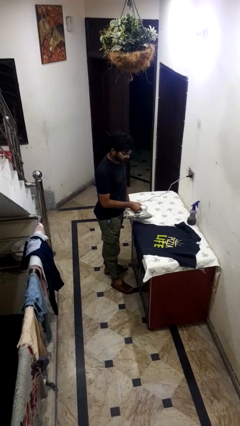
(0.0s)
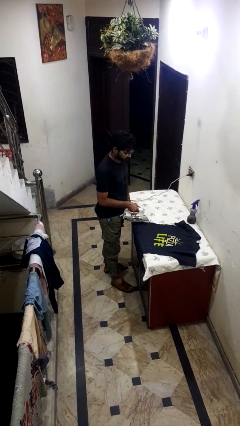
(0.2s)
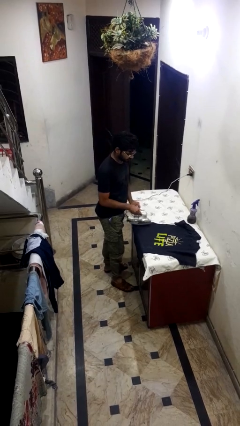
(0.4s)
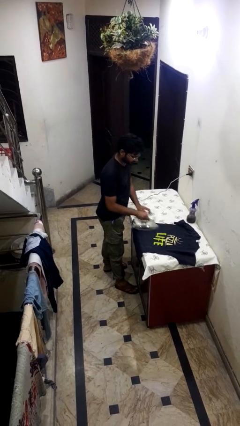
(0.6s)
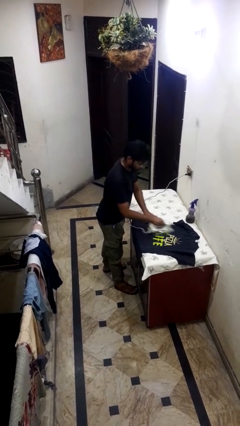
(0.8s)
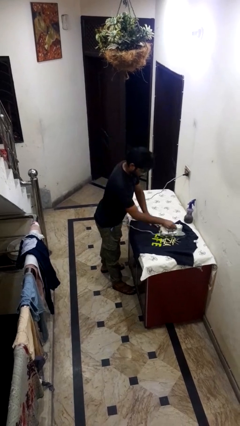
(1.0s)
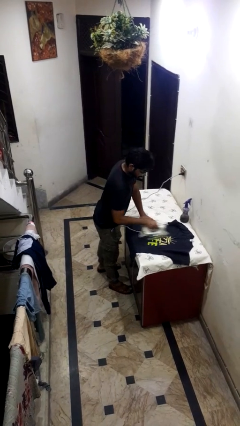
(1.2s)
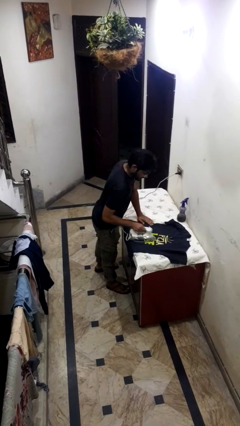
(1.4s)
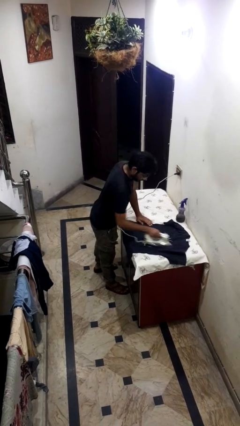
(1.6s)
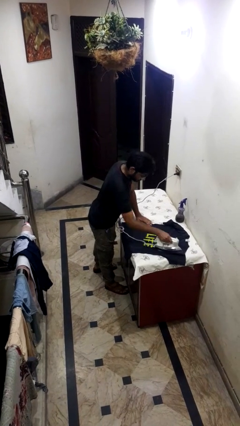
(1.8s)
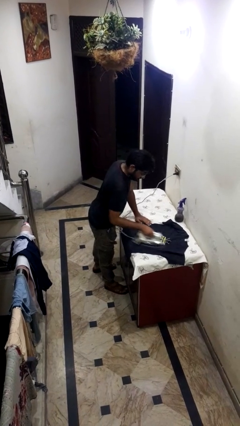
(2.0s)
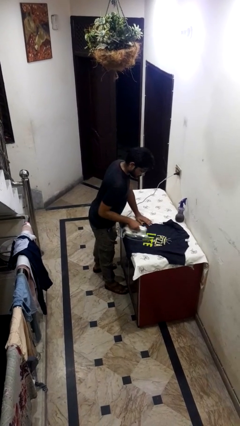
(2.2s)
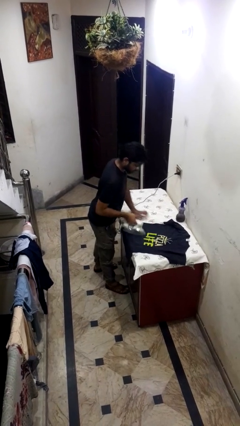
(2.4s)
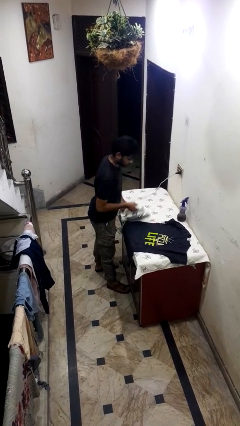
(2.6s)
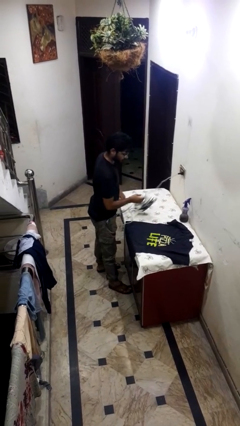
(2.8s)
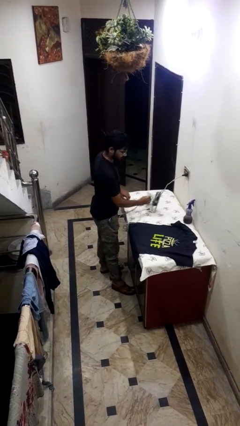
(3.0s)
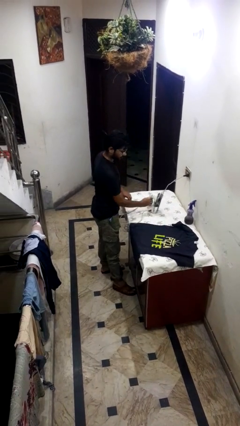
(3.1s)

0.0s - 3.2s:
person irons clothes

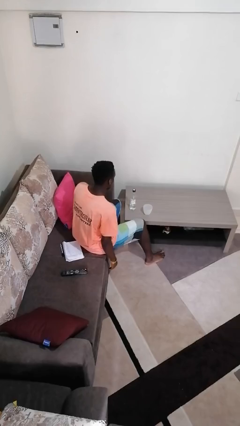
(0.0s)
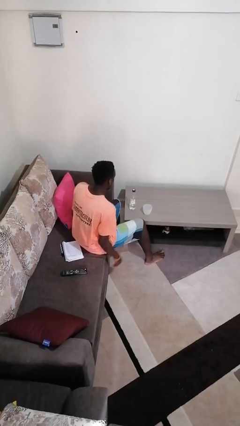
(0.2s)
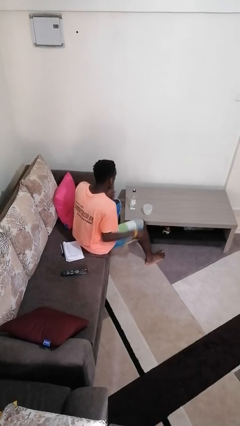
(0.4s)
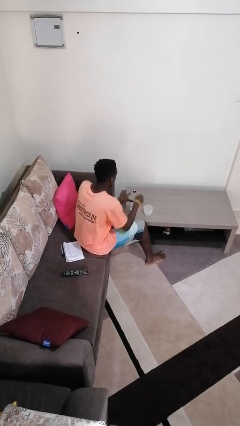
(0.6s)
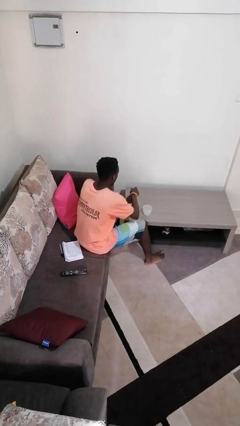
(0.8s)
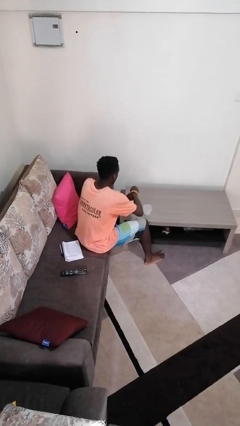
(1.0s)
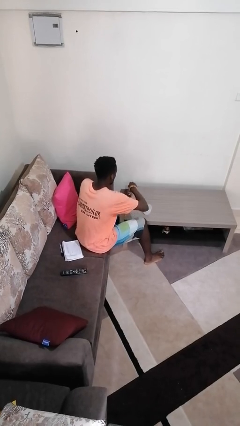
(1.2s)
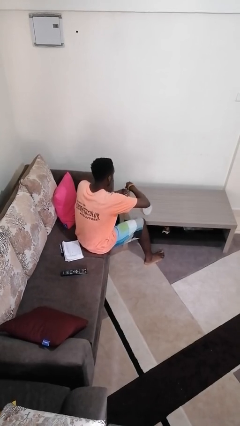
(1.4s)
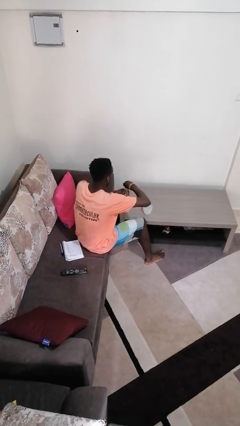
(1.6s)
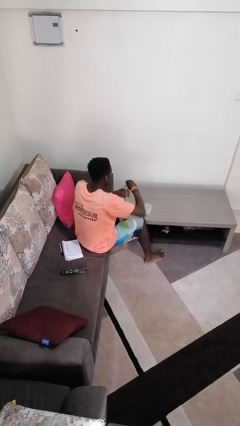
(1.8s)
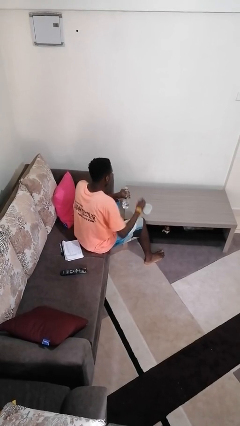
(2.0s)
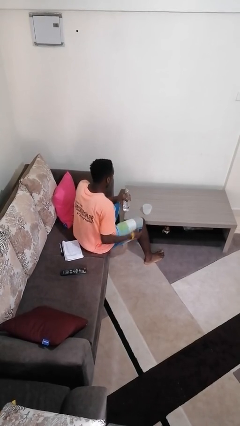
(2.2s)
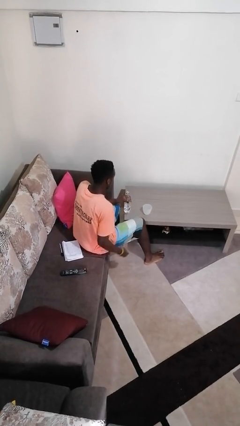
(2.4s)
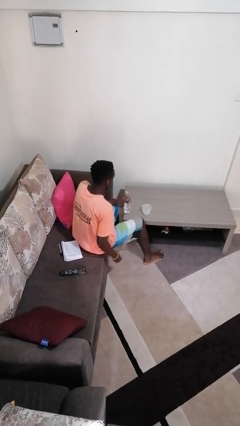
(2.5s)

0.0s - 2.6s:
person unscrews lid from bottle

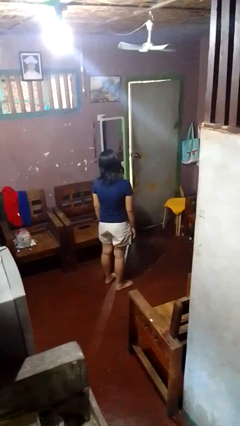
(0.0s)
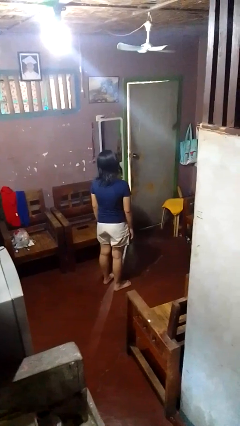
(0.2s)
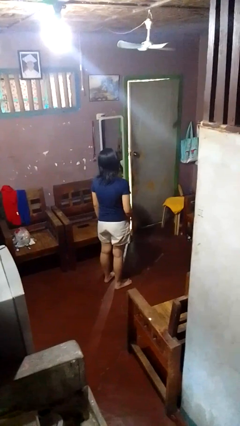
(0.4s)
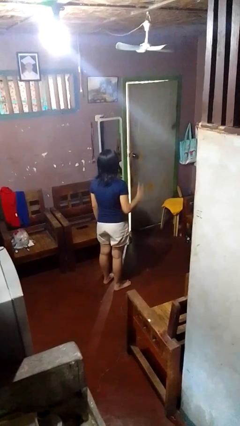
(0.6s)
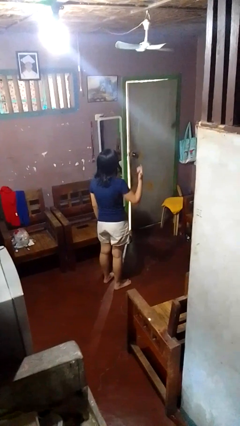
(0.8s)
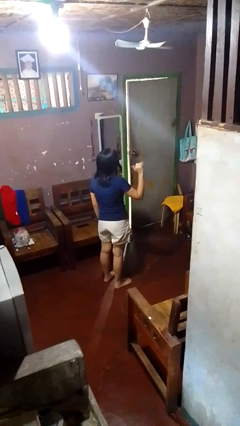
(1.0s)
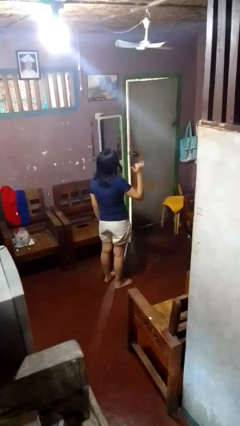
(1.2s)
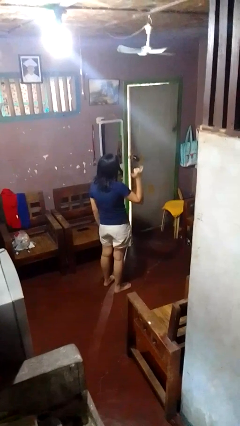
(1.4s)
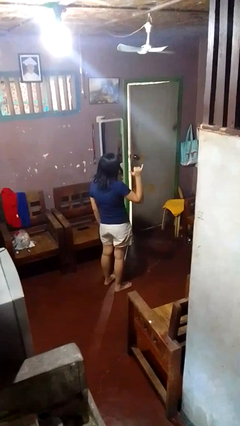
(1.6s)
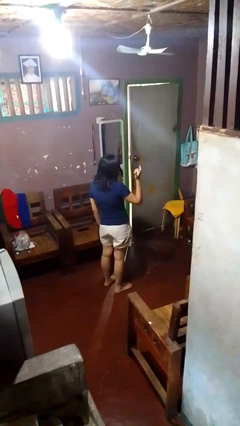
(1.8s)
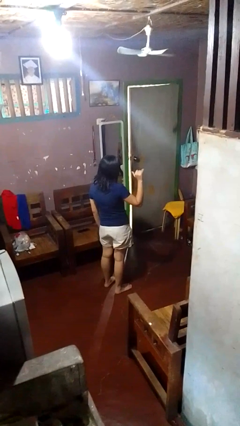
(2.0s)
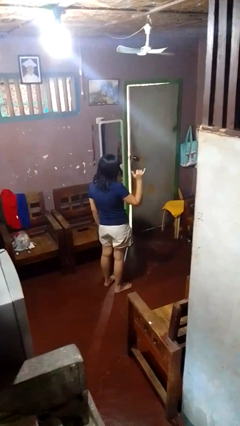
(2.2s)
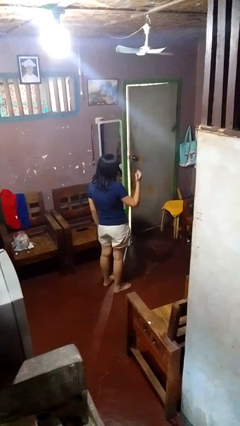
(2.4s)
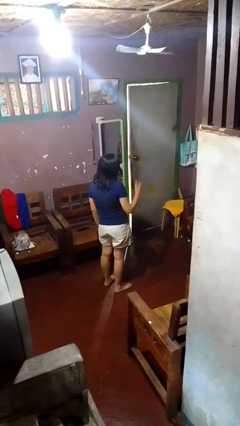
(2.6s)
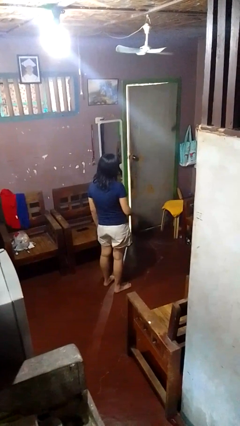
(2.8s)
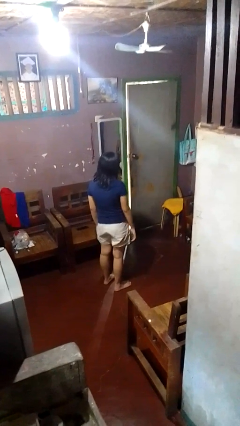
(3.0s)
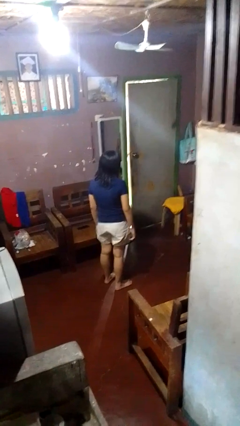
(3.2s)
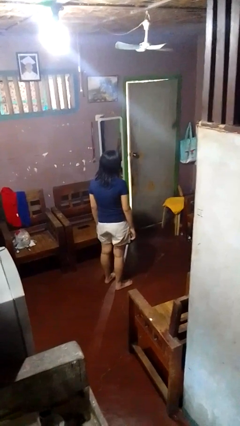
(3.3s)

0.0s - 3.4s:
person gestures hang loose

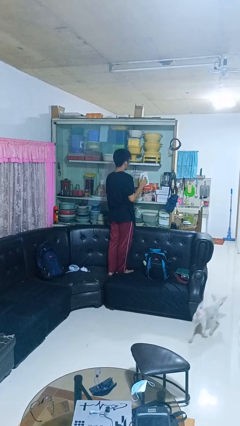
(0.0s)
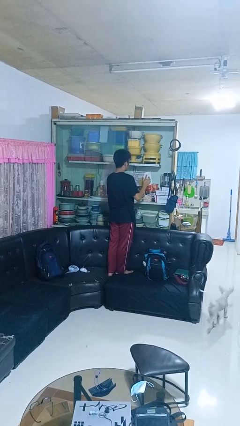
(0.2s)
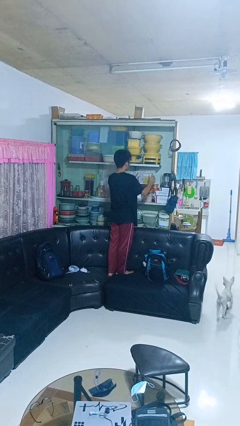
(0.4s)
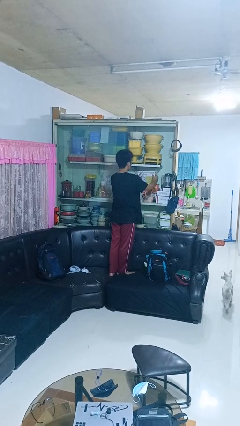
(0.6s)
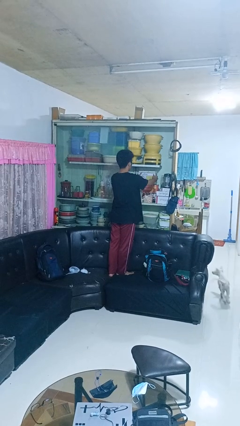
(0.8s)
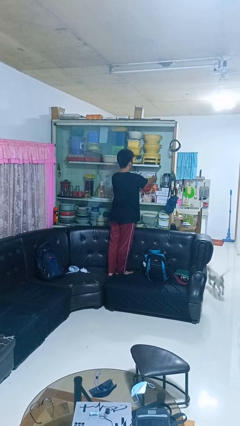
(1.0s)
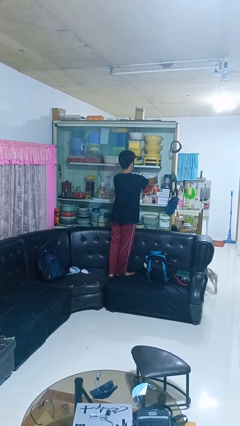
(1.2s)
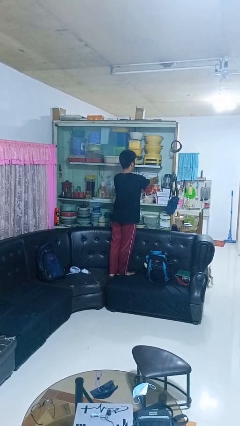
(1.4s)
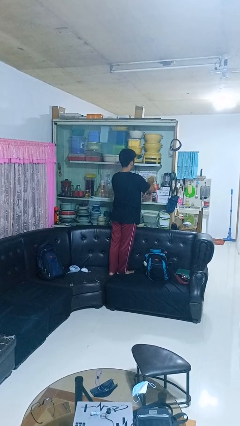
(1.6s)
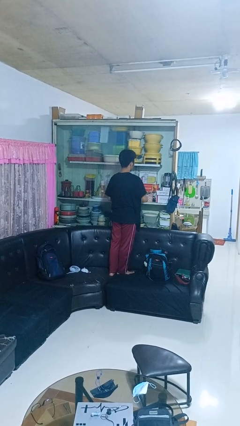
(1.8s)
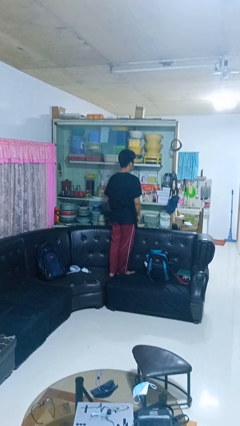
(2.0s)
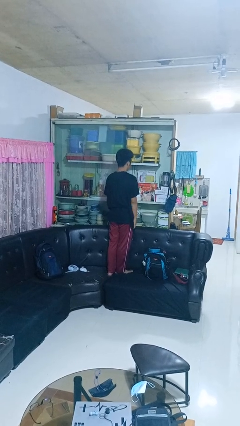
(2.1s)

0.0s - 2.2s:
person puts down object into cabinet

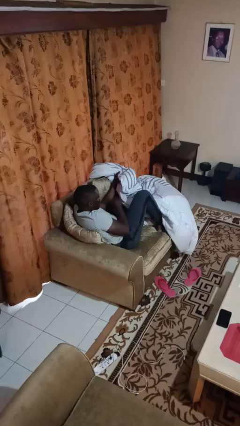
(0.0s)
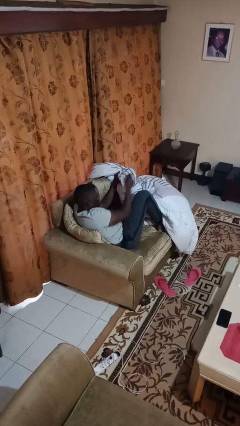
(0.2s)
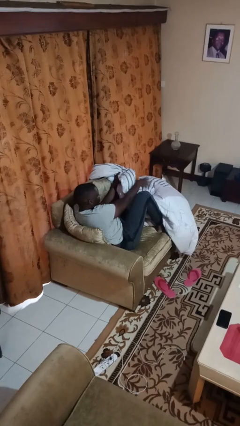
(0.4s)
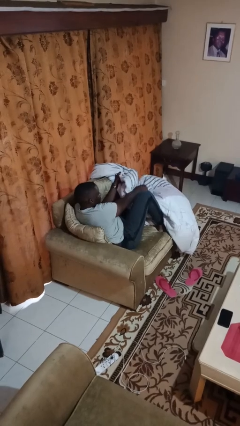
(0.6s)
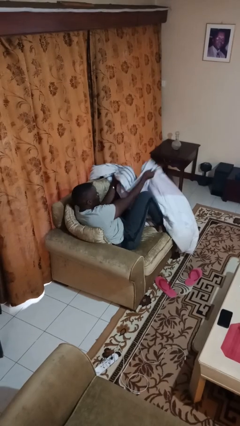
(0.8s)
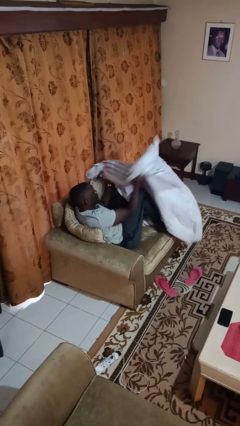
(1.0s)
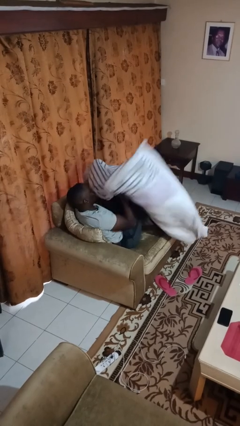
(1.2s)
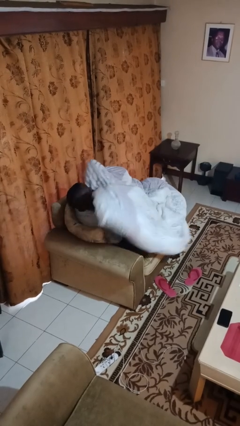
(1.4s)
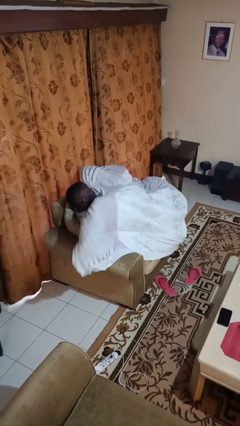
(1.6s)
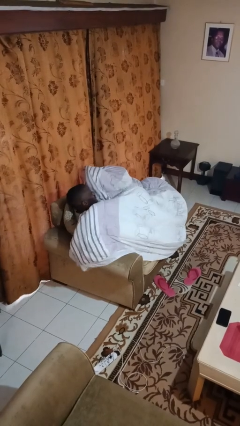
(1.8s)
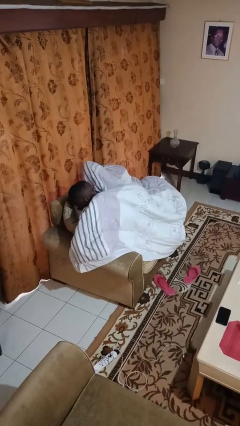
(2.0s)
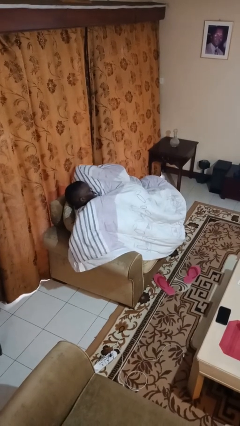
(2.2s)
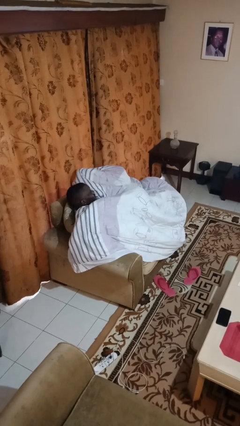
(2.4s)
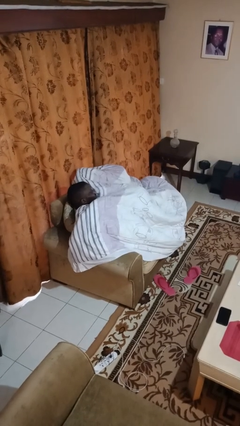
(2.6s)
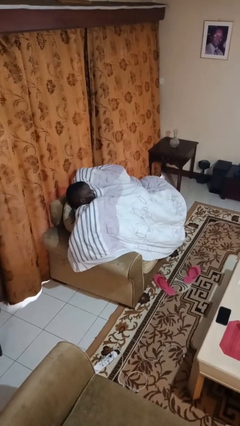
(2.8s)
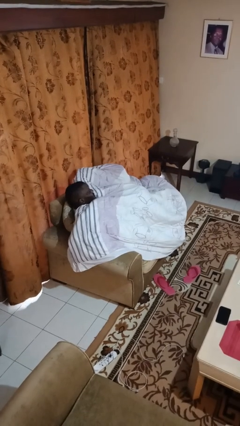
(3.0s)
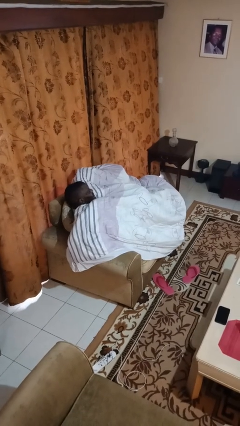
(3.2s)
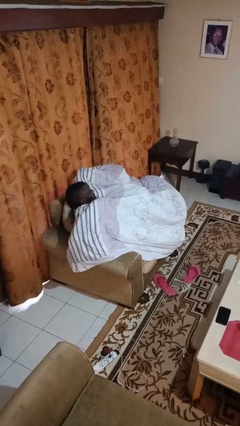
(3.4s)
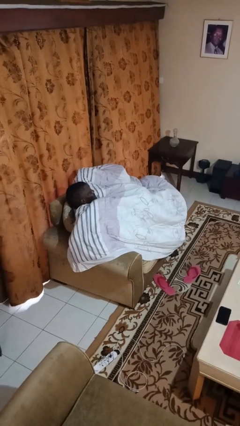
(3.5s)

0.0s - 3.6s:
person covers with blanket

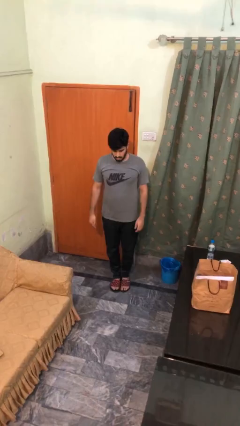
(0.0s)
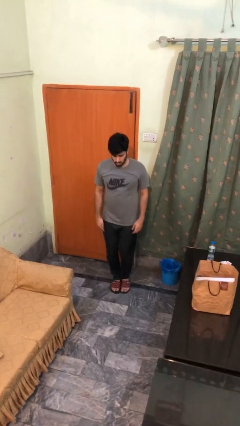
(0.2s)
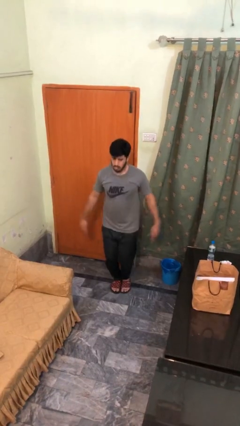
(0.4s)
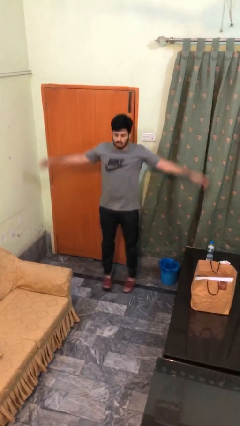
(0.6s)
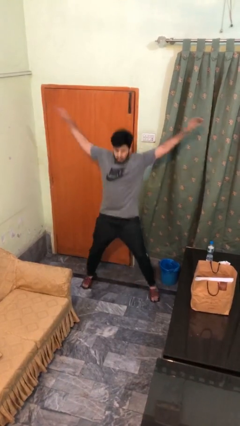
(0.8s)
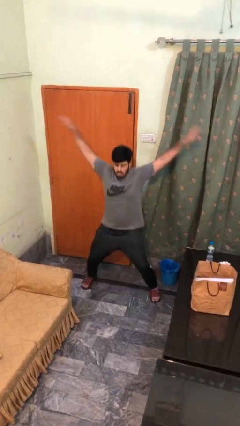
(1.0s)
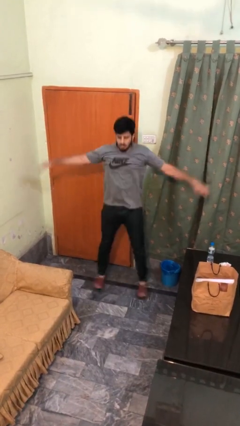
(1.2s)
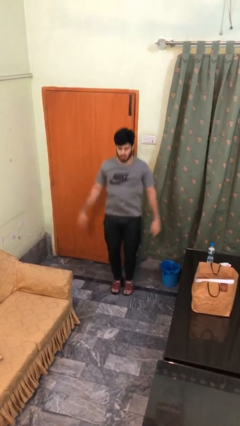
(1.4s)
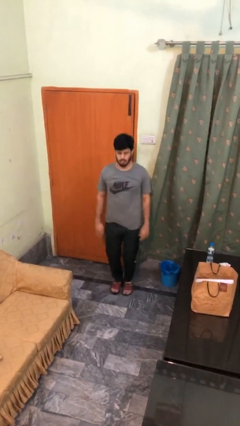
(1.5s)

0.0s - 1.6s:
person exercises with jumping jacks

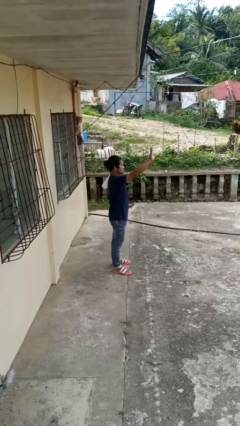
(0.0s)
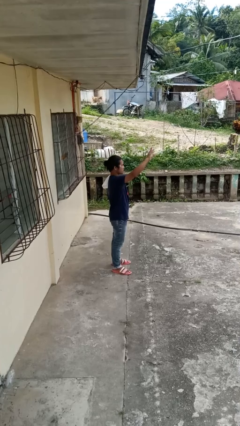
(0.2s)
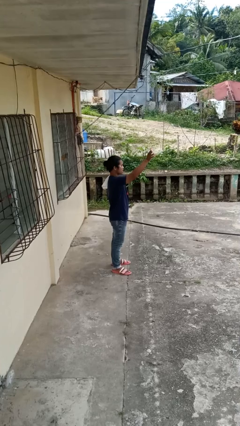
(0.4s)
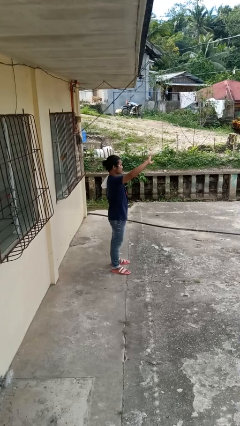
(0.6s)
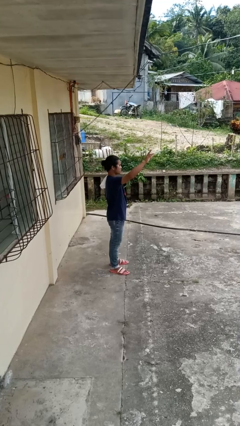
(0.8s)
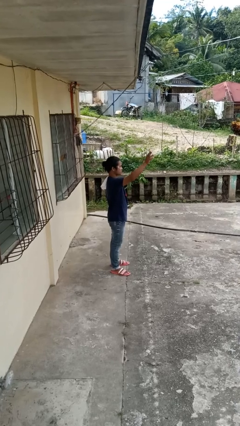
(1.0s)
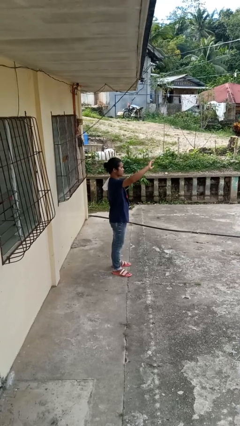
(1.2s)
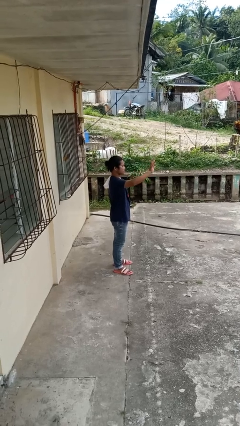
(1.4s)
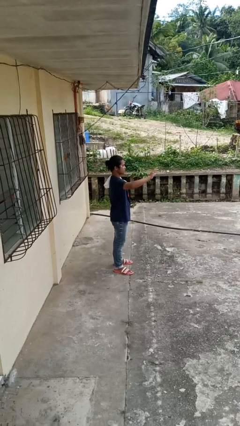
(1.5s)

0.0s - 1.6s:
person waves at person
